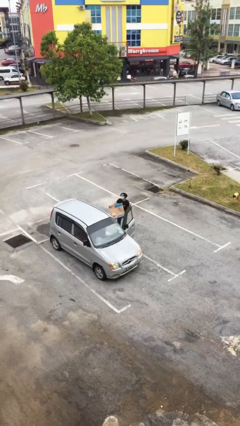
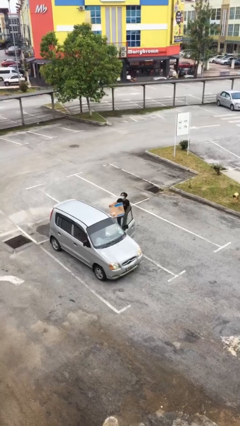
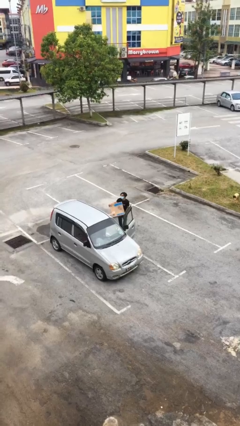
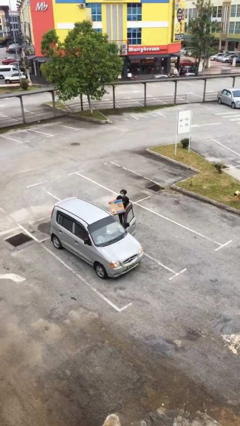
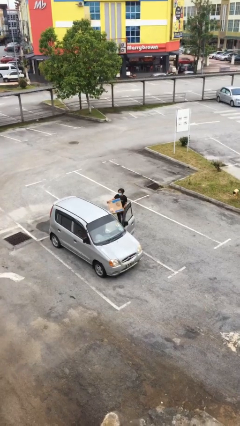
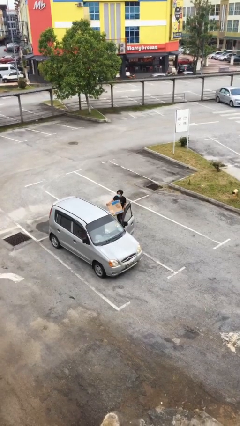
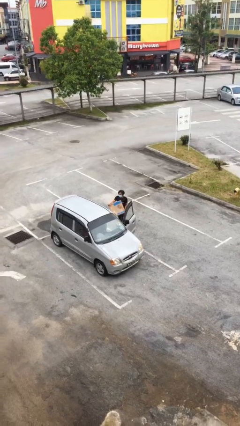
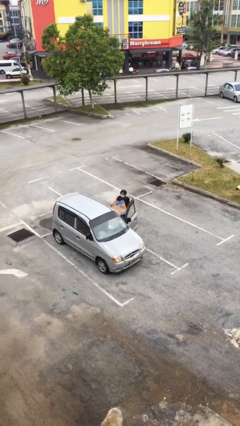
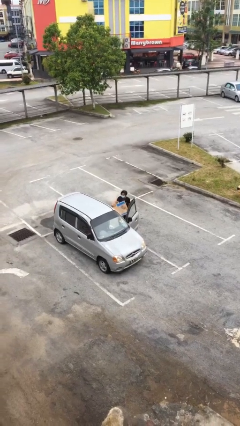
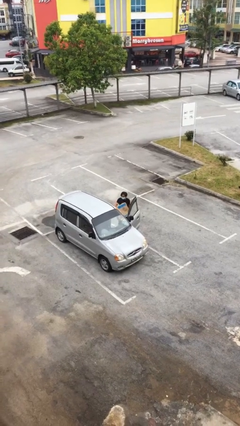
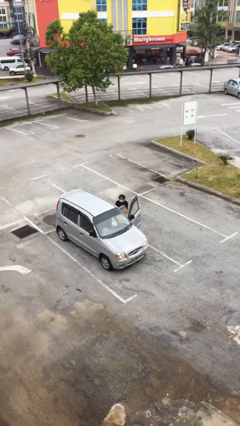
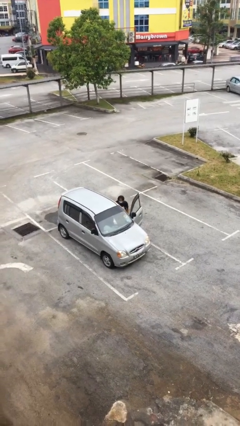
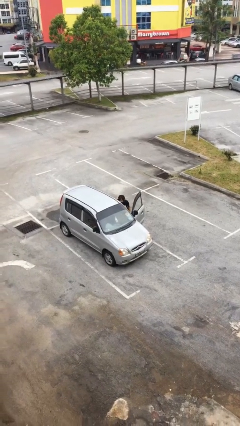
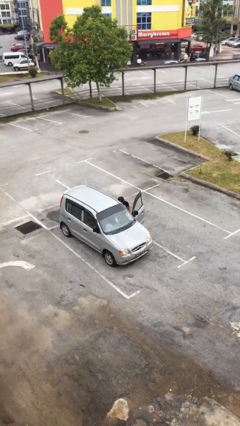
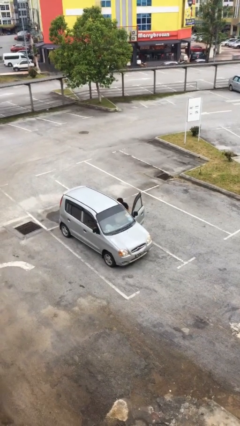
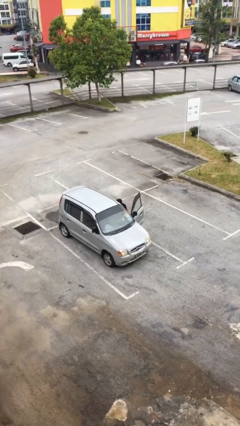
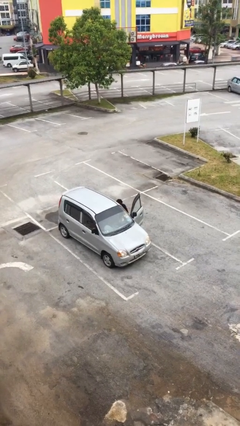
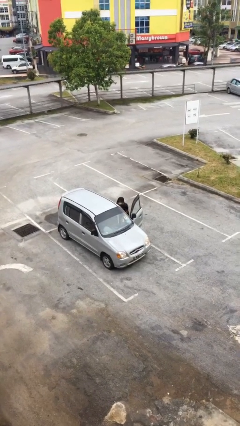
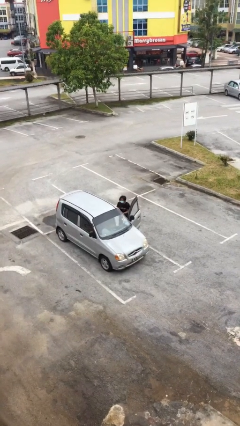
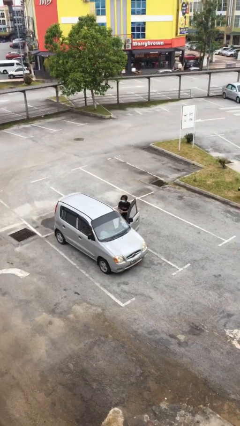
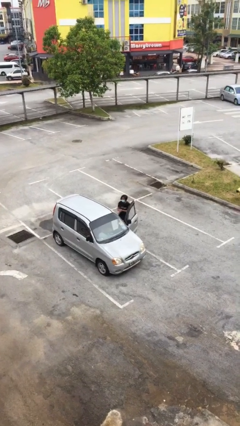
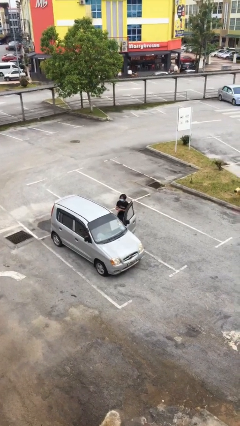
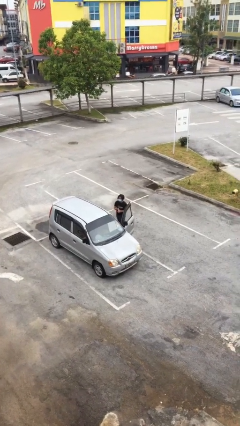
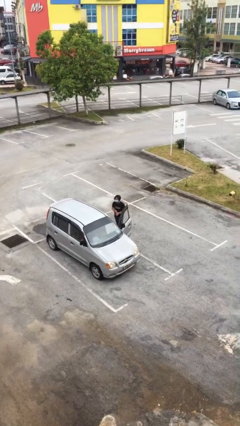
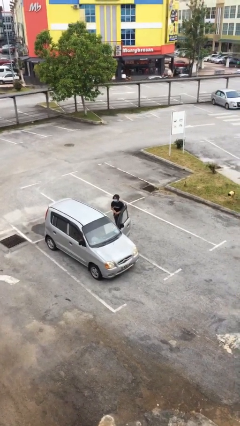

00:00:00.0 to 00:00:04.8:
person loads car

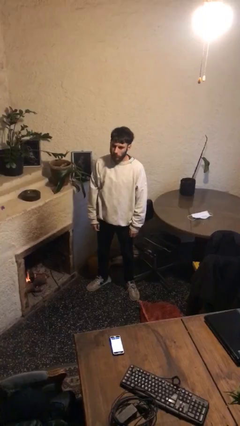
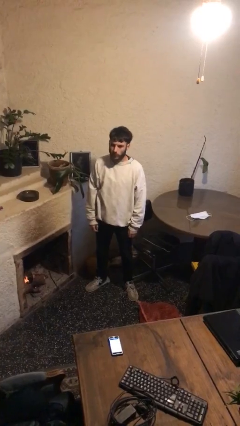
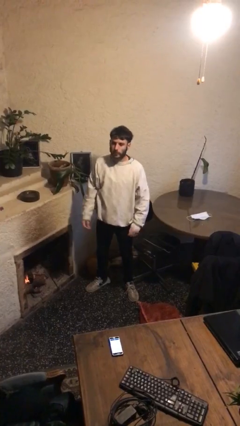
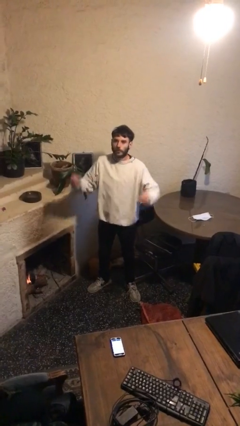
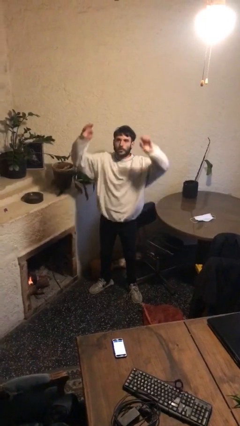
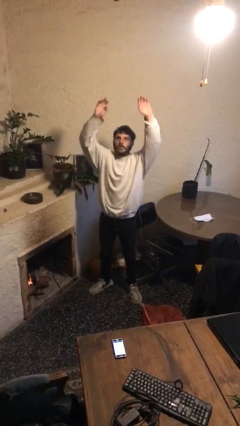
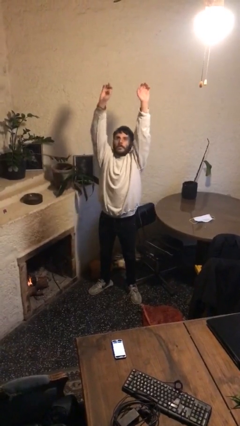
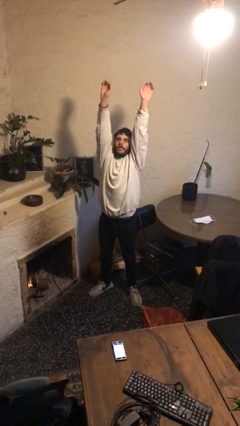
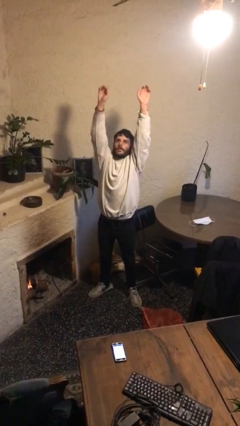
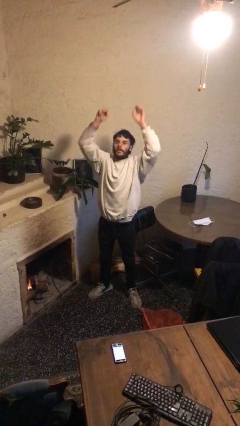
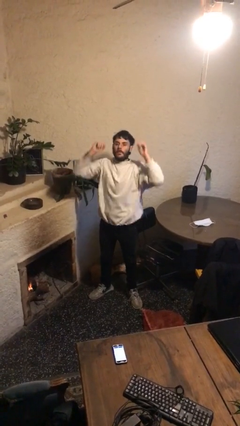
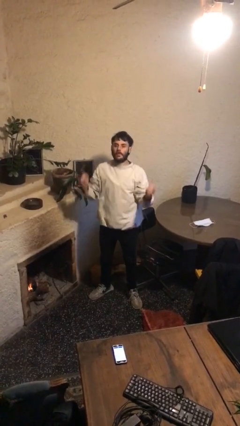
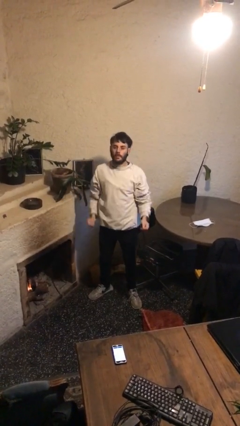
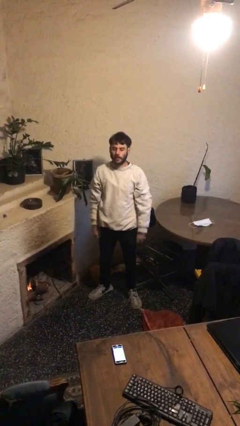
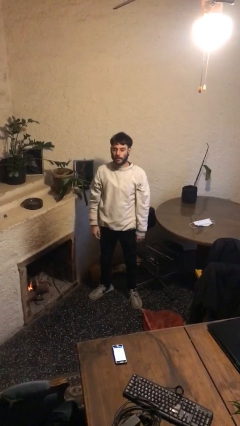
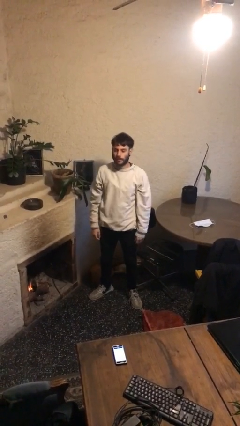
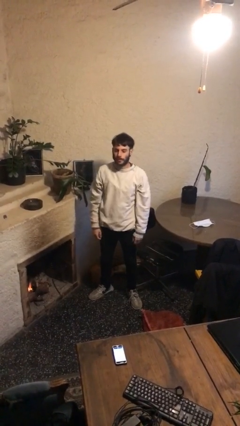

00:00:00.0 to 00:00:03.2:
person stretches arms over head

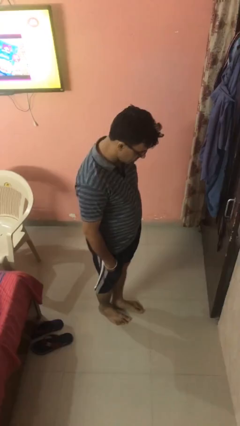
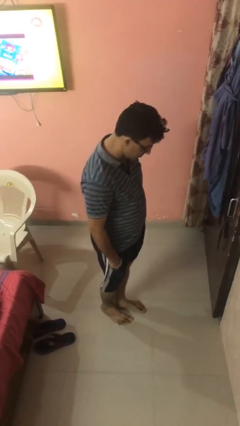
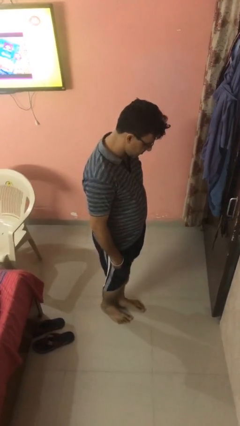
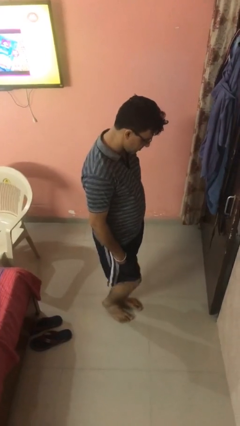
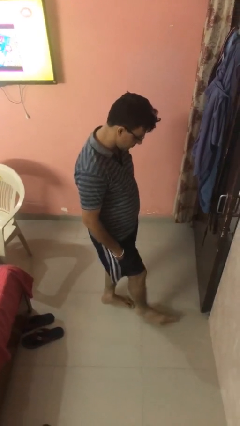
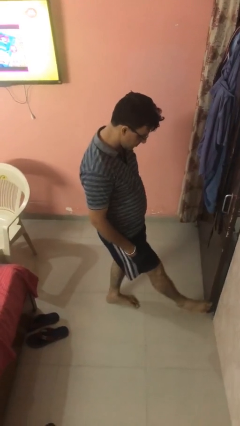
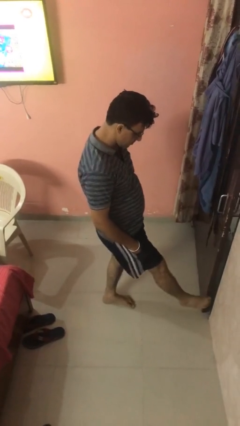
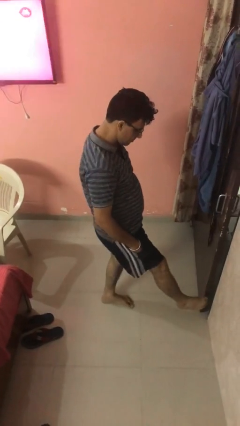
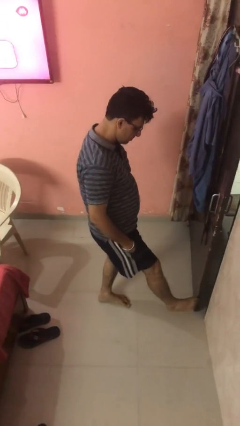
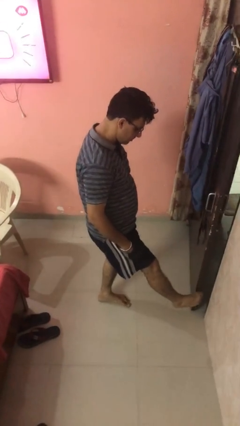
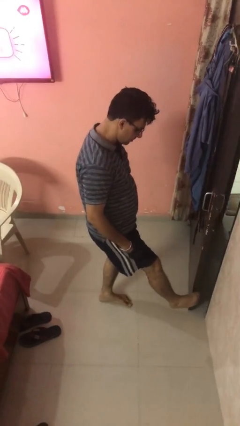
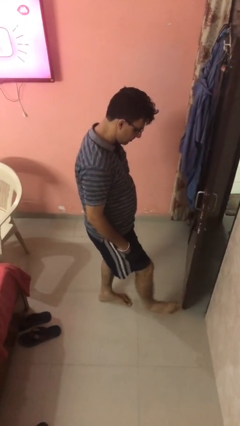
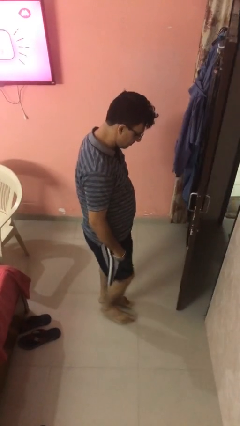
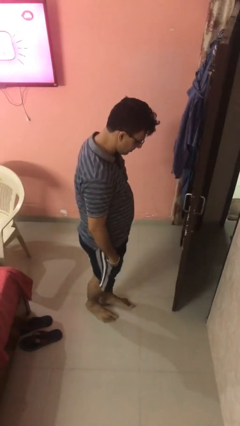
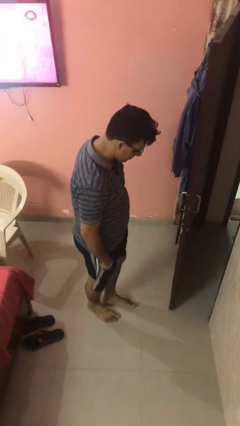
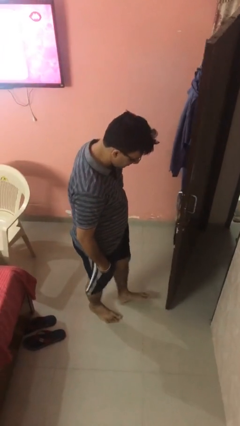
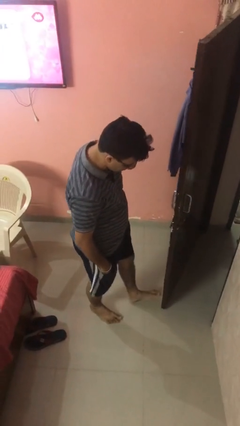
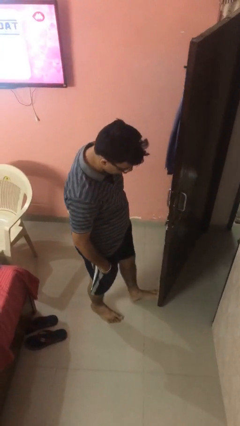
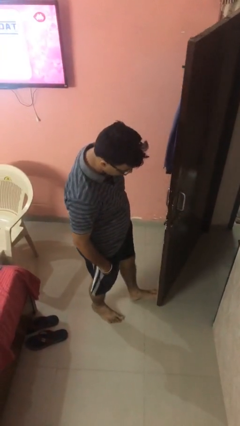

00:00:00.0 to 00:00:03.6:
person opens facility door

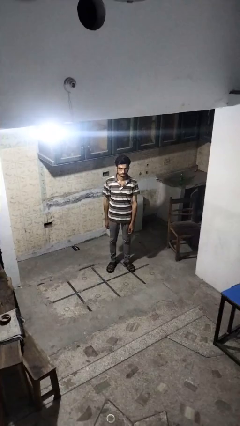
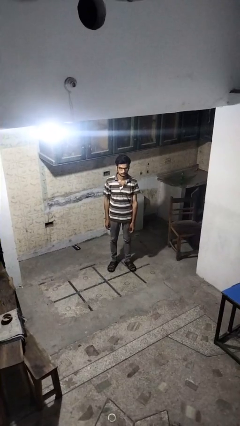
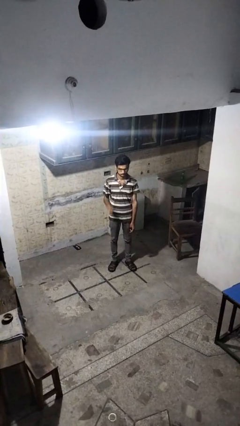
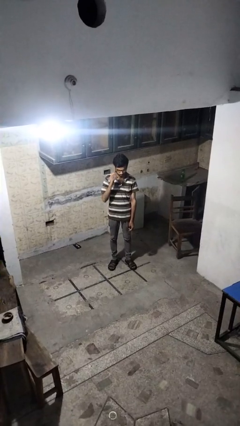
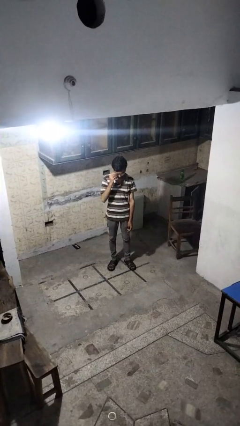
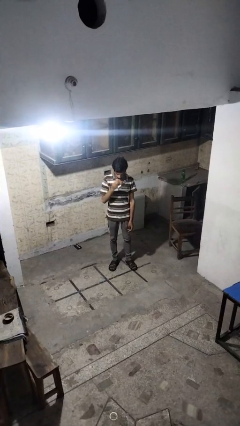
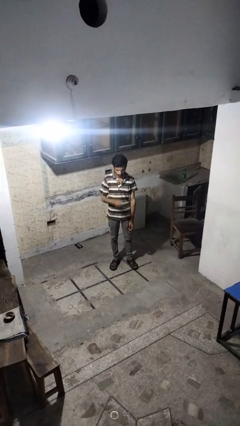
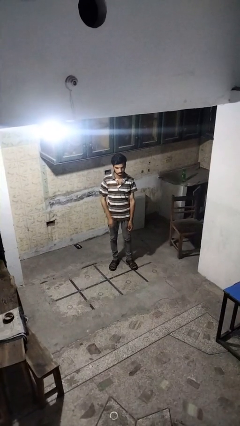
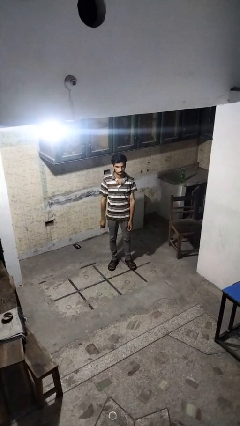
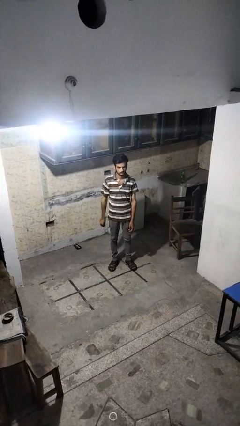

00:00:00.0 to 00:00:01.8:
person takes off glasses

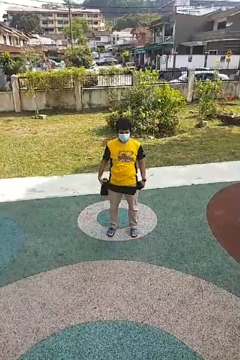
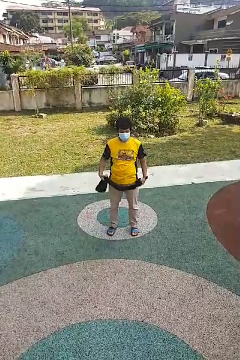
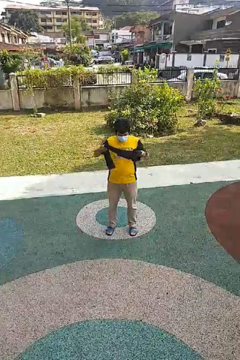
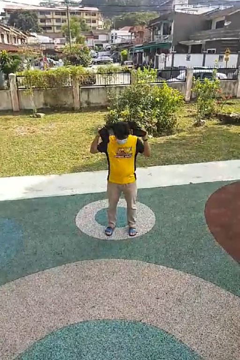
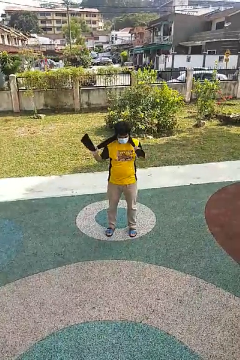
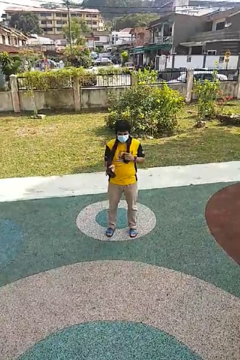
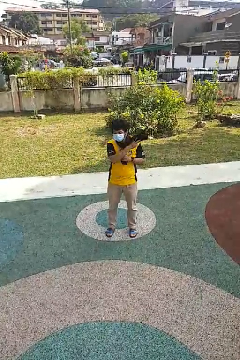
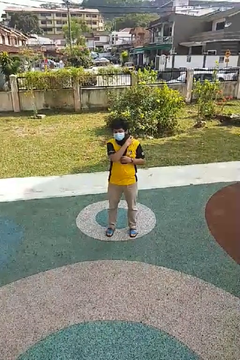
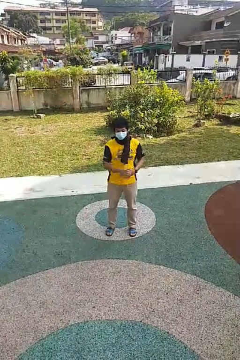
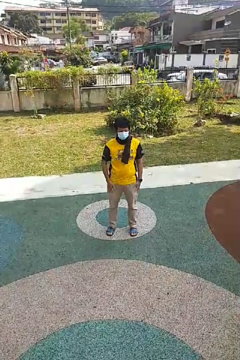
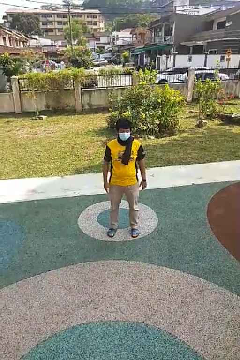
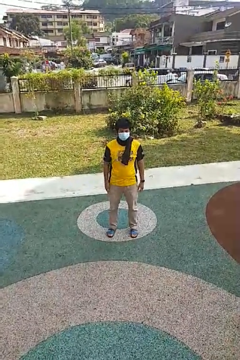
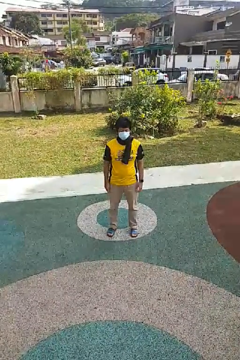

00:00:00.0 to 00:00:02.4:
person puts on scarf

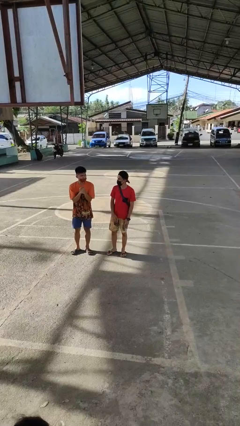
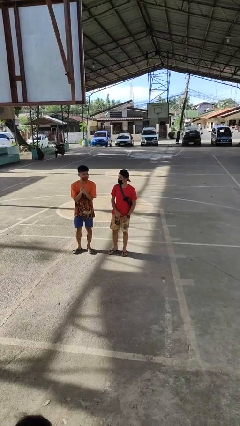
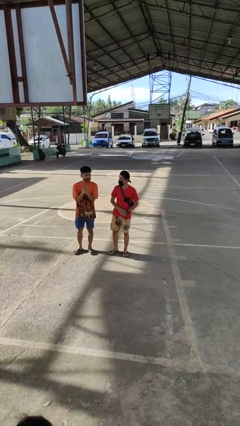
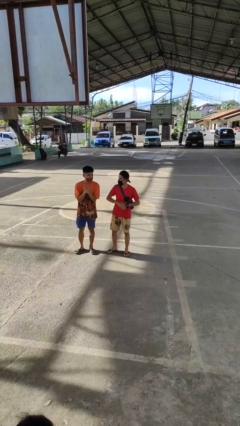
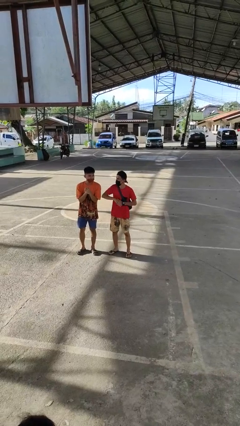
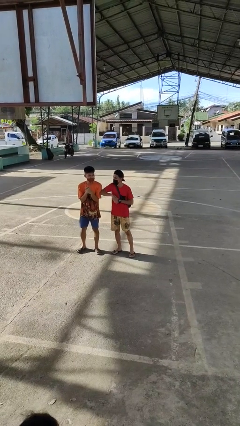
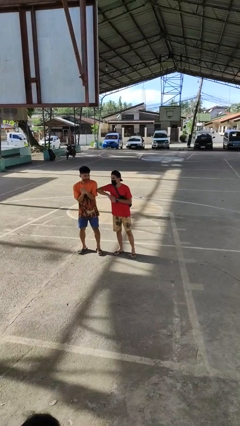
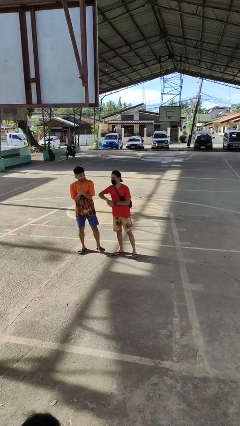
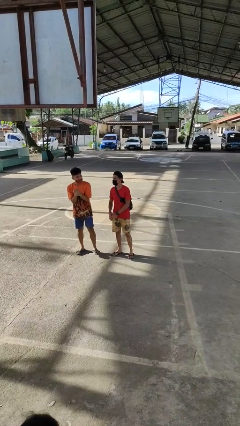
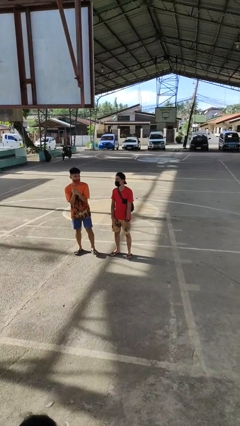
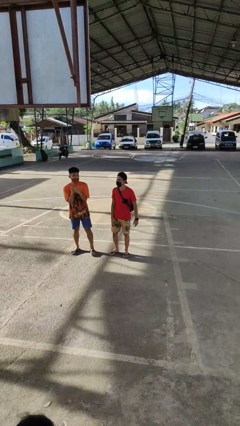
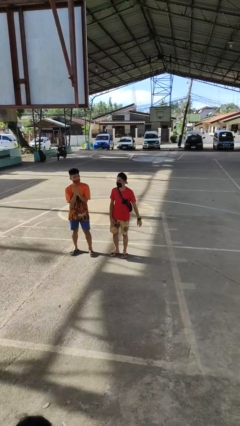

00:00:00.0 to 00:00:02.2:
person nudges person with elbow
